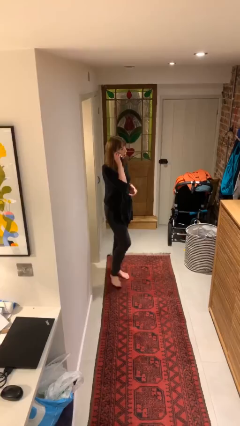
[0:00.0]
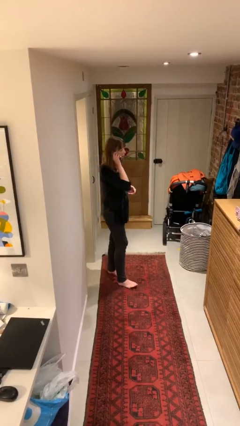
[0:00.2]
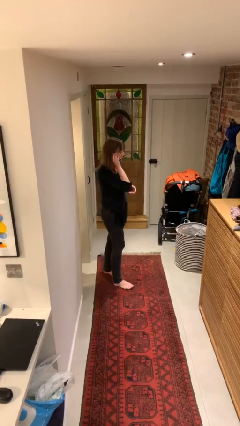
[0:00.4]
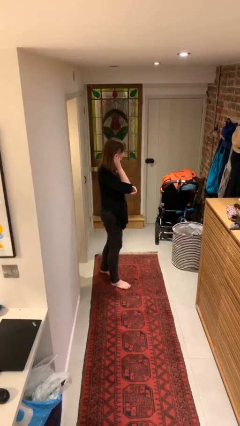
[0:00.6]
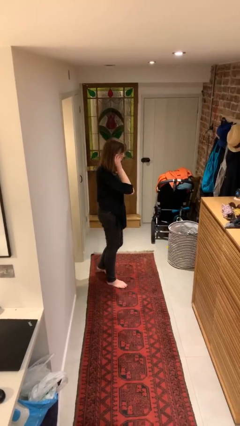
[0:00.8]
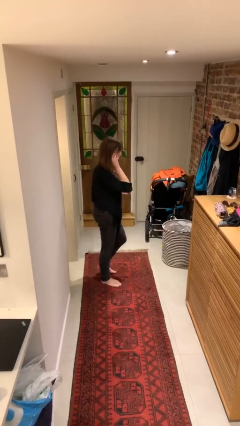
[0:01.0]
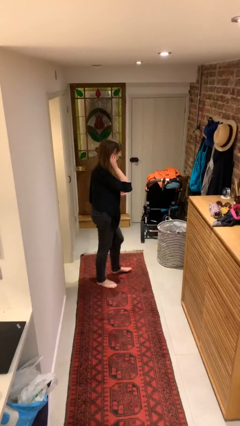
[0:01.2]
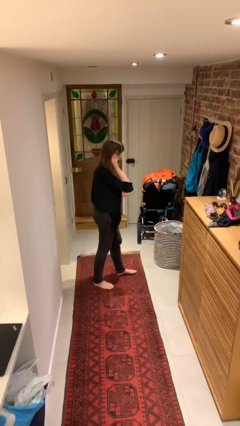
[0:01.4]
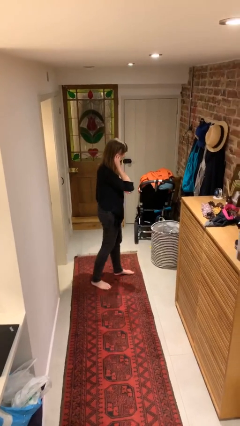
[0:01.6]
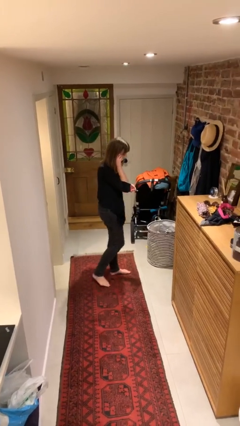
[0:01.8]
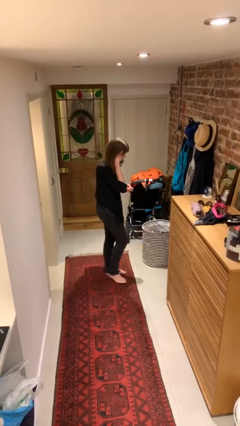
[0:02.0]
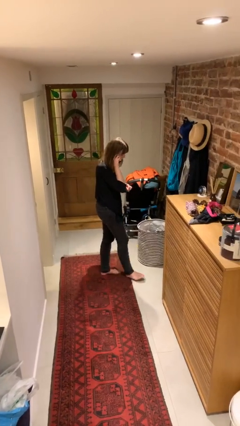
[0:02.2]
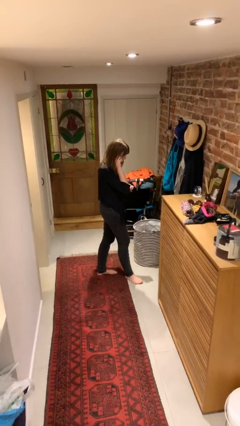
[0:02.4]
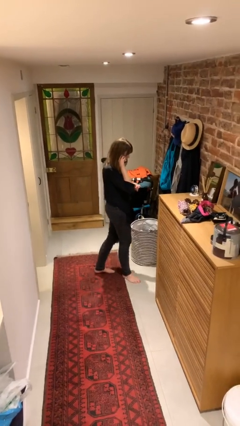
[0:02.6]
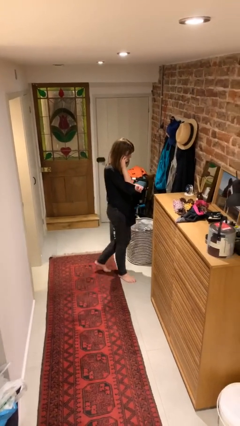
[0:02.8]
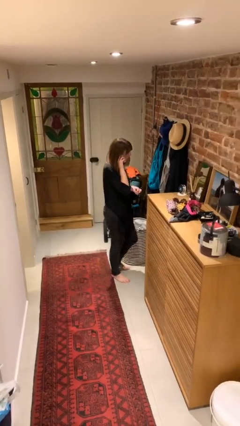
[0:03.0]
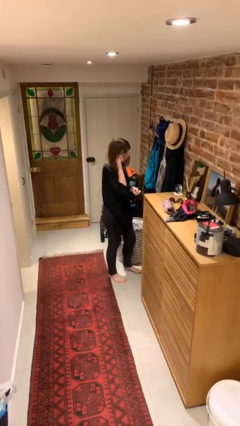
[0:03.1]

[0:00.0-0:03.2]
person talks on phone

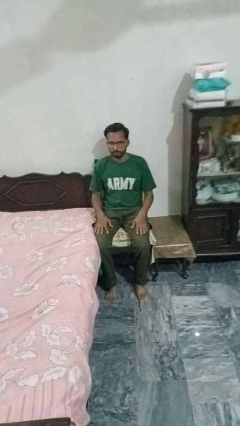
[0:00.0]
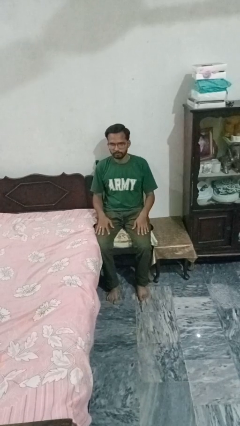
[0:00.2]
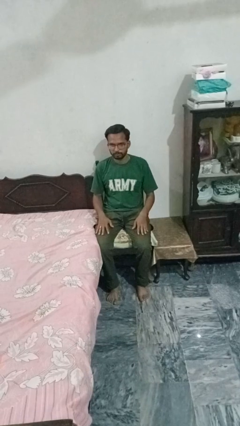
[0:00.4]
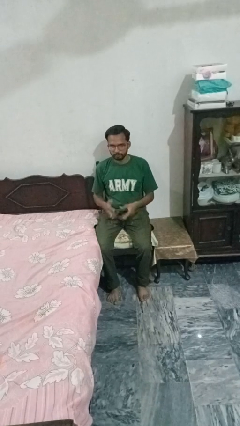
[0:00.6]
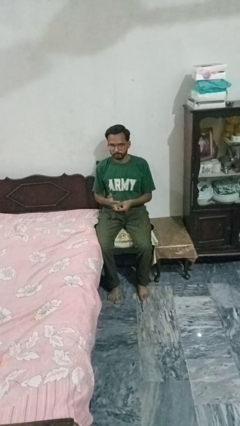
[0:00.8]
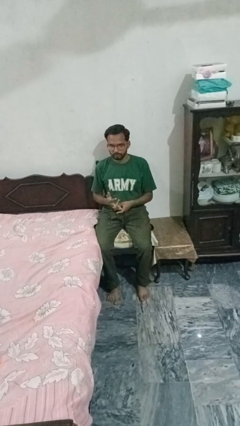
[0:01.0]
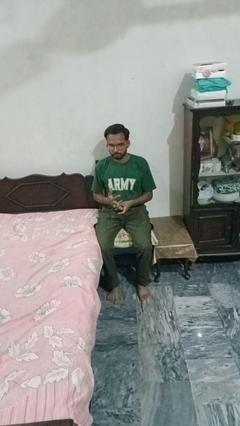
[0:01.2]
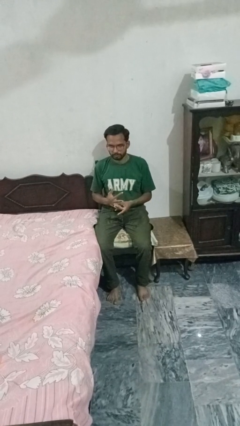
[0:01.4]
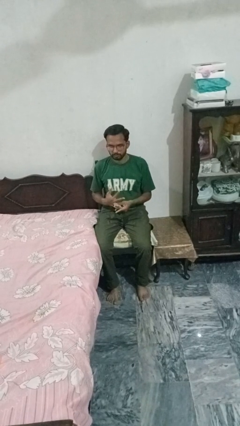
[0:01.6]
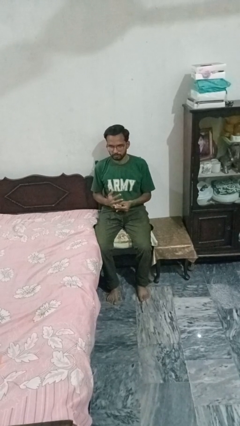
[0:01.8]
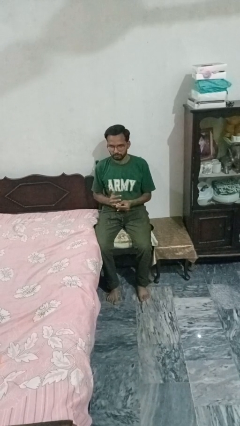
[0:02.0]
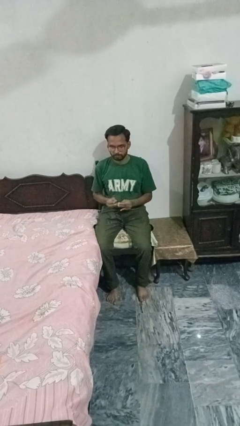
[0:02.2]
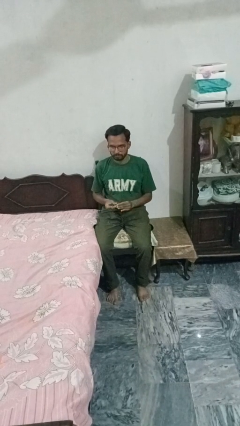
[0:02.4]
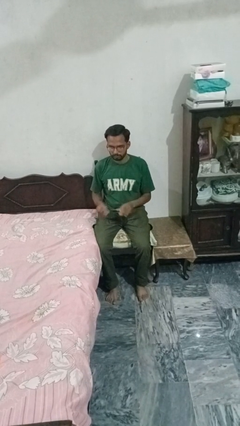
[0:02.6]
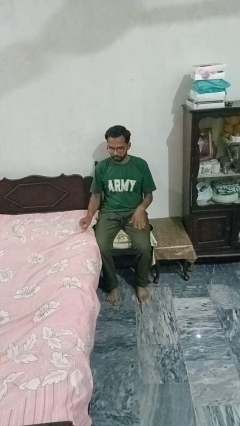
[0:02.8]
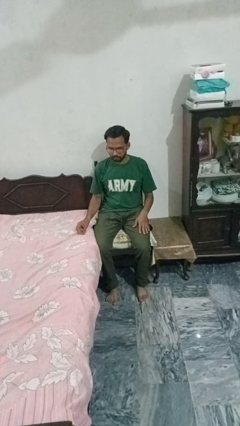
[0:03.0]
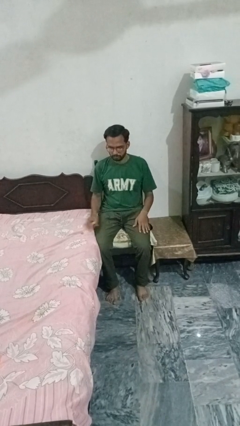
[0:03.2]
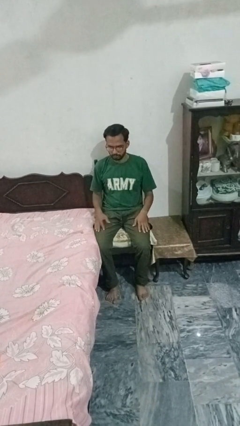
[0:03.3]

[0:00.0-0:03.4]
person takes off ring

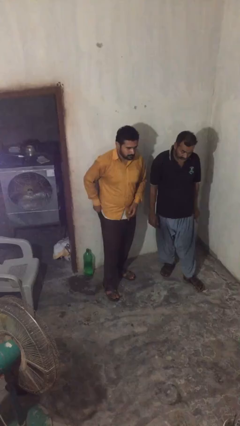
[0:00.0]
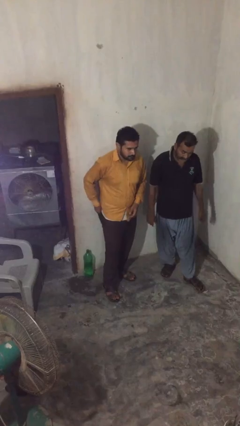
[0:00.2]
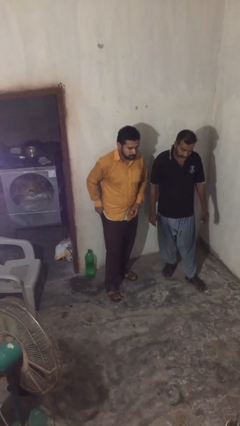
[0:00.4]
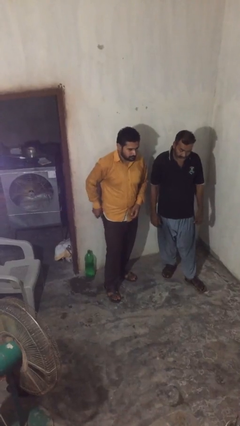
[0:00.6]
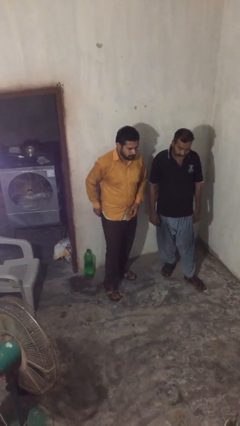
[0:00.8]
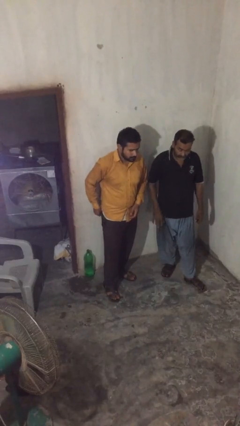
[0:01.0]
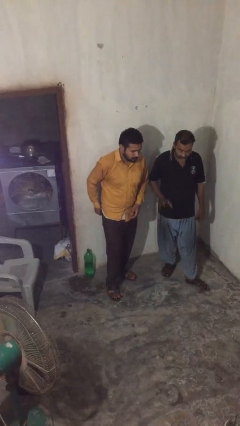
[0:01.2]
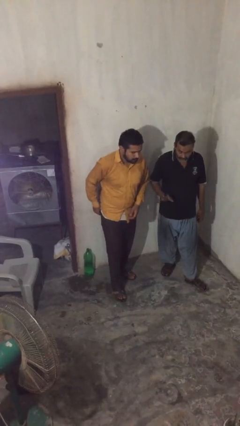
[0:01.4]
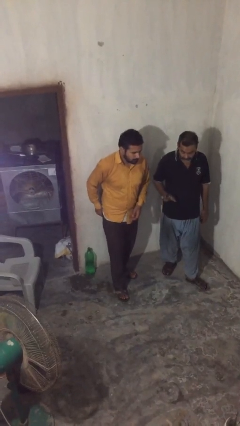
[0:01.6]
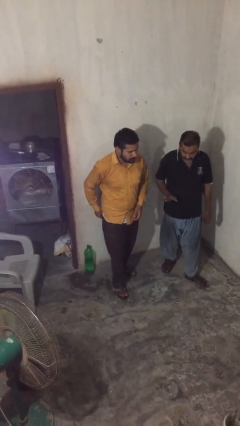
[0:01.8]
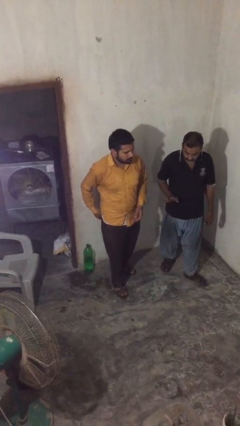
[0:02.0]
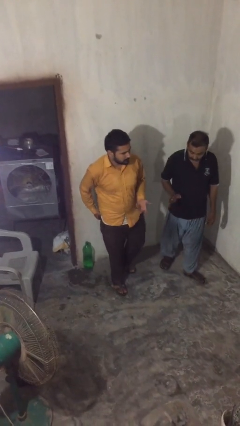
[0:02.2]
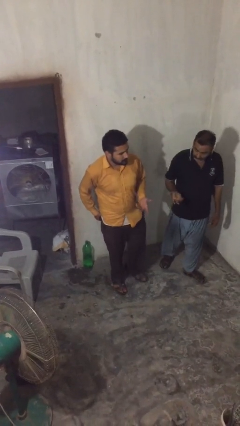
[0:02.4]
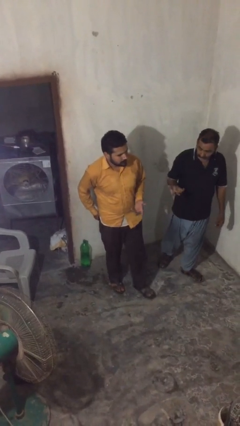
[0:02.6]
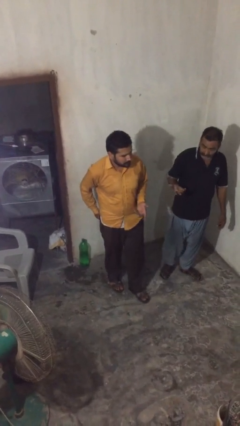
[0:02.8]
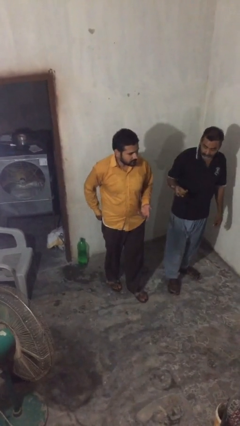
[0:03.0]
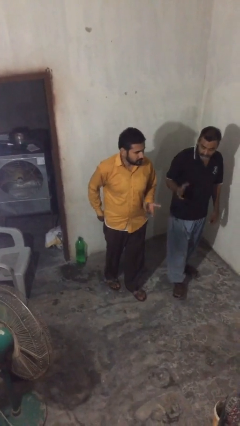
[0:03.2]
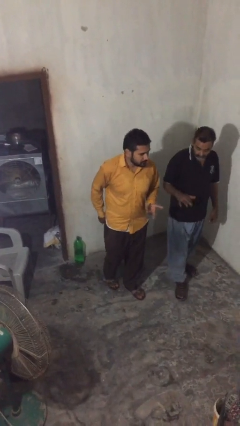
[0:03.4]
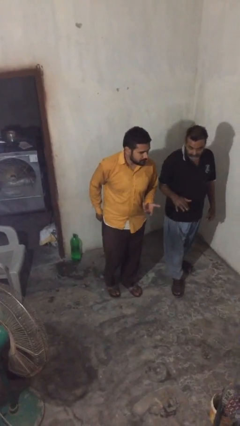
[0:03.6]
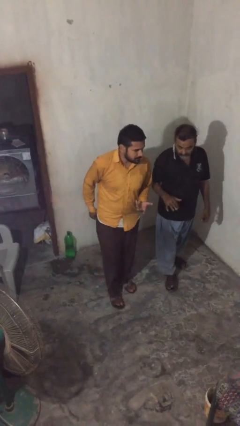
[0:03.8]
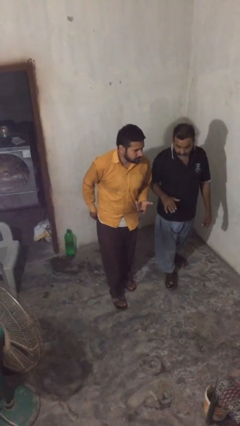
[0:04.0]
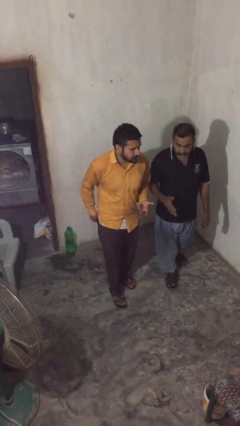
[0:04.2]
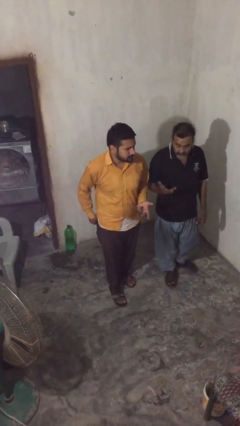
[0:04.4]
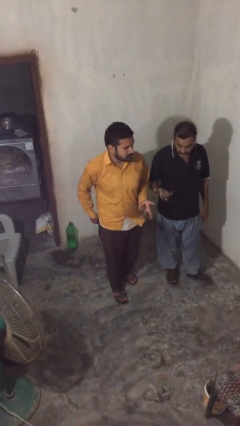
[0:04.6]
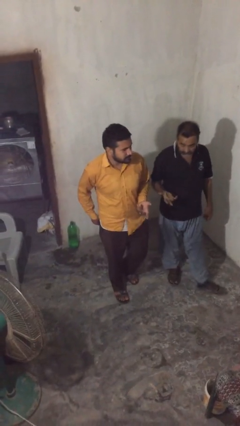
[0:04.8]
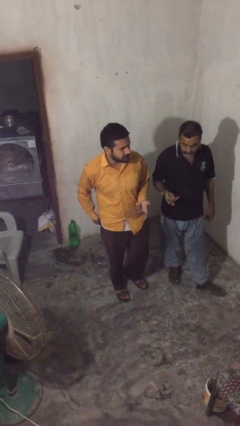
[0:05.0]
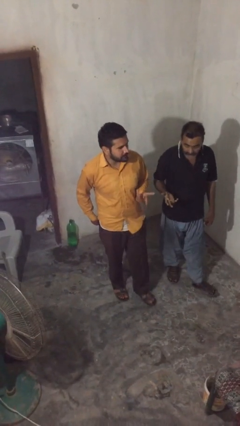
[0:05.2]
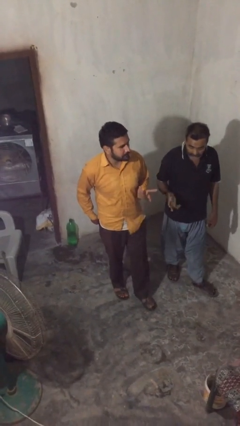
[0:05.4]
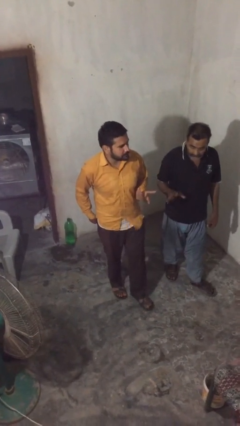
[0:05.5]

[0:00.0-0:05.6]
person talks to person

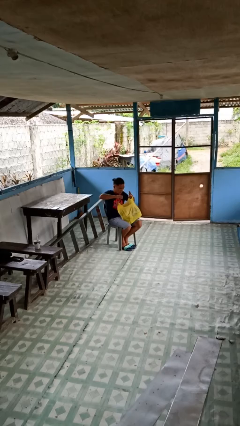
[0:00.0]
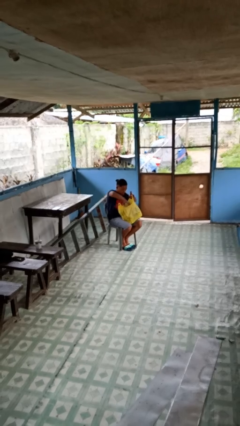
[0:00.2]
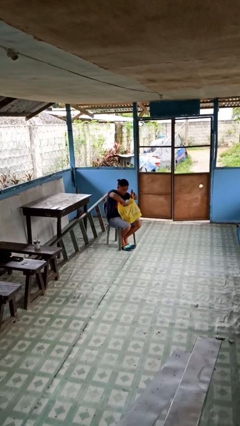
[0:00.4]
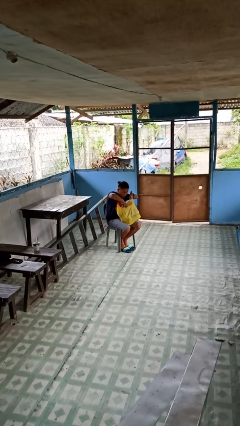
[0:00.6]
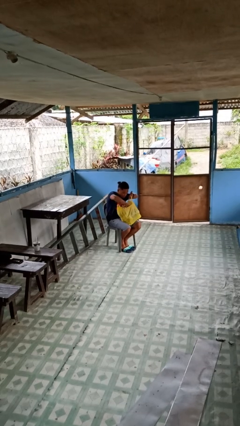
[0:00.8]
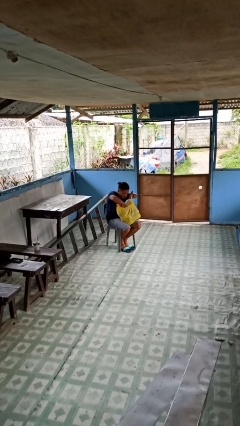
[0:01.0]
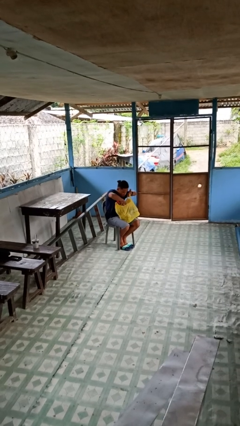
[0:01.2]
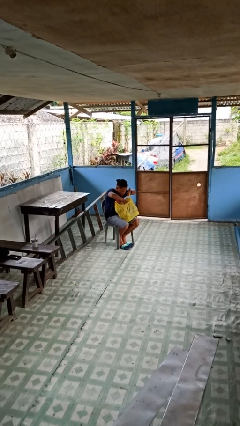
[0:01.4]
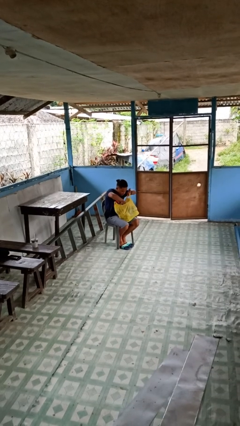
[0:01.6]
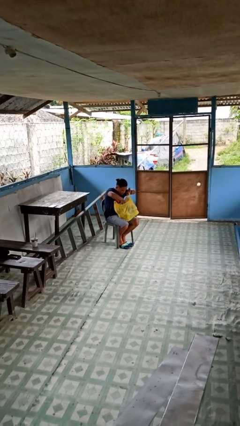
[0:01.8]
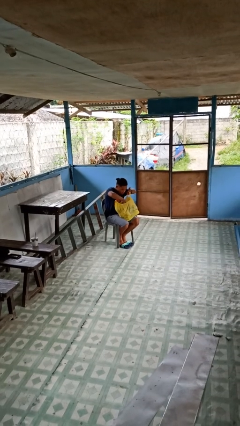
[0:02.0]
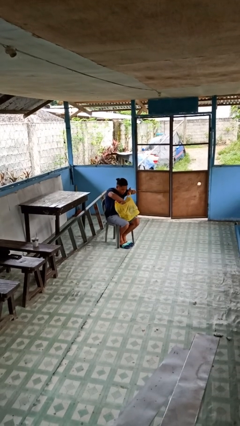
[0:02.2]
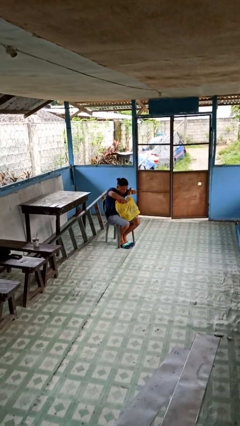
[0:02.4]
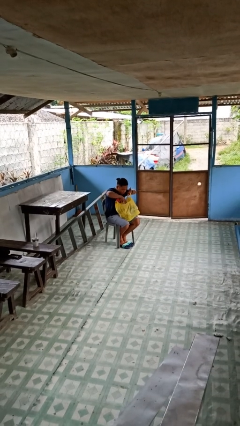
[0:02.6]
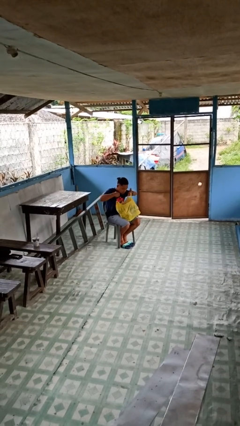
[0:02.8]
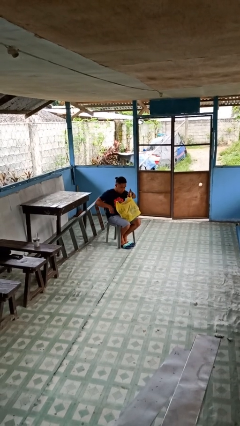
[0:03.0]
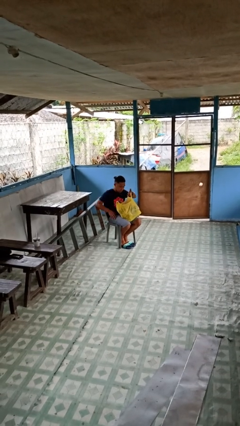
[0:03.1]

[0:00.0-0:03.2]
person searches in bag

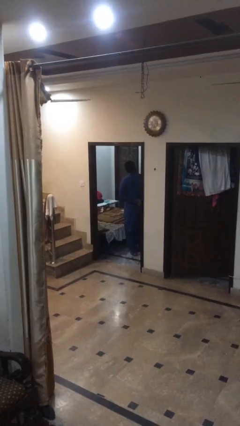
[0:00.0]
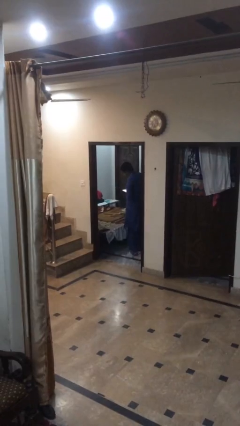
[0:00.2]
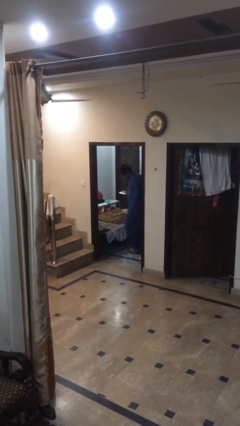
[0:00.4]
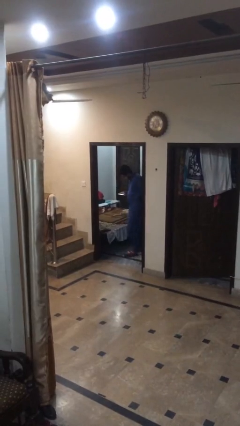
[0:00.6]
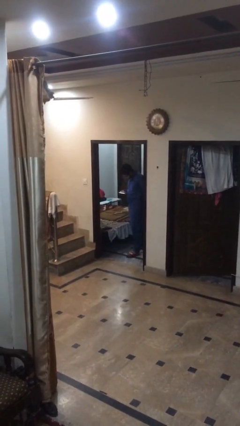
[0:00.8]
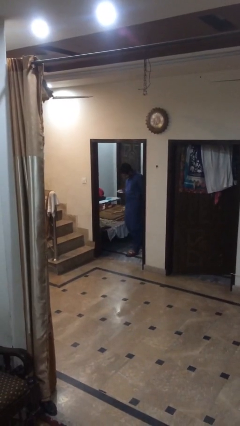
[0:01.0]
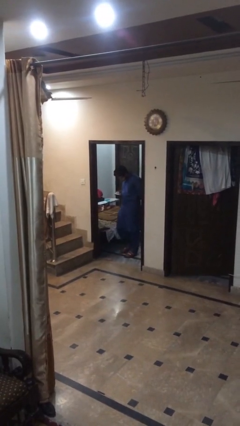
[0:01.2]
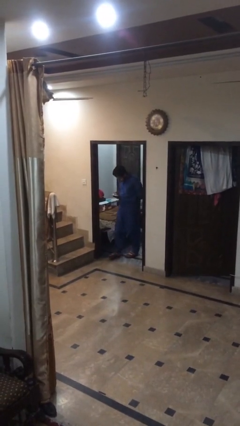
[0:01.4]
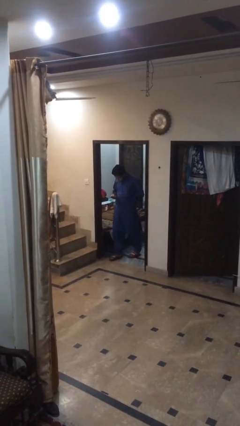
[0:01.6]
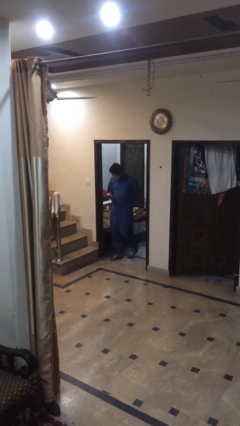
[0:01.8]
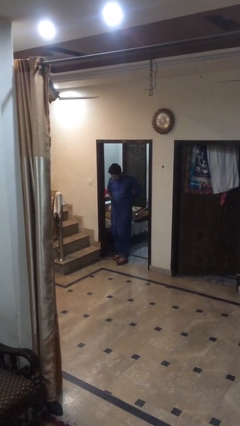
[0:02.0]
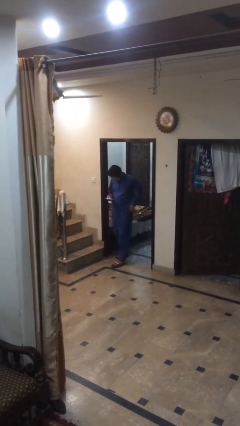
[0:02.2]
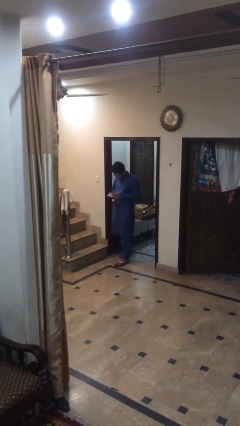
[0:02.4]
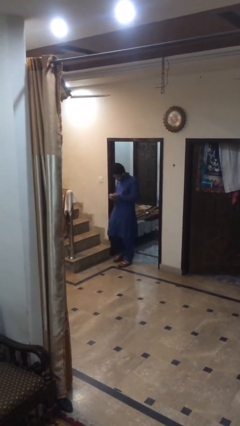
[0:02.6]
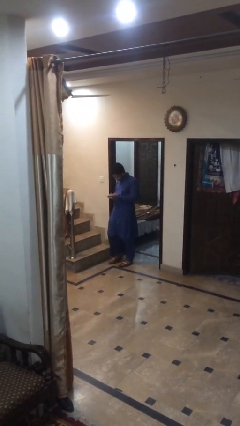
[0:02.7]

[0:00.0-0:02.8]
person exits scene through structure
